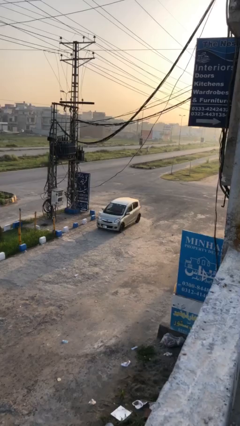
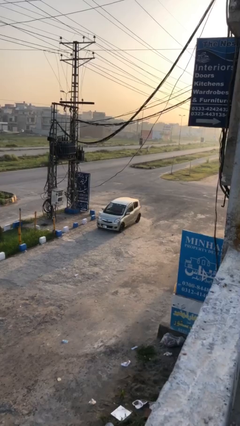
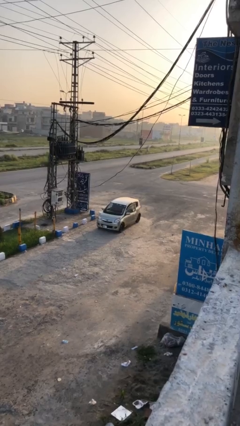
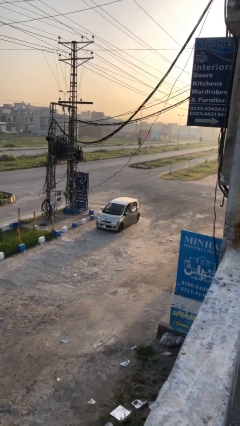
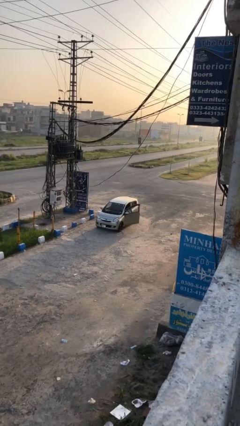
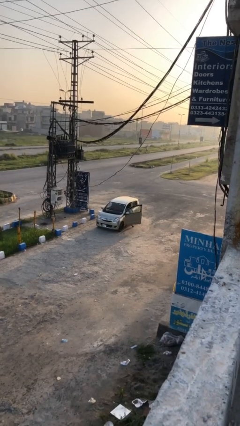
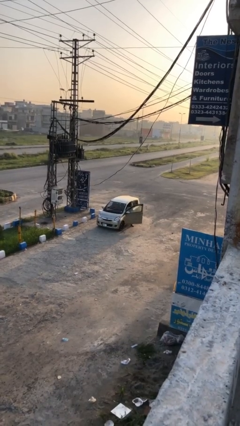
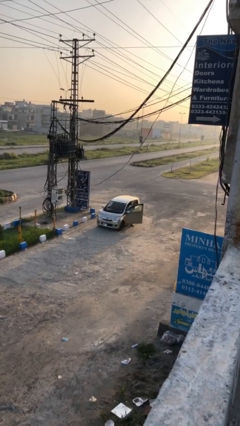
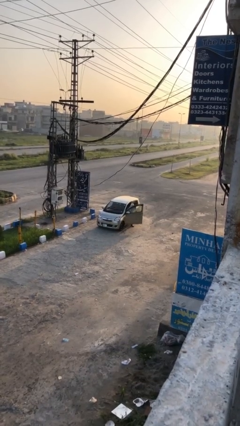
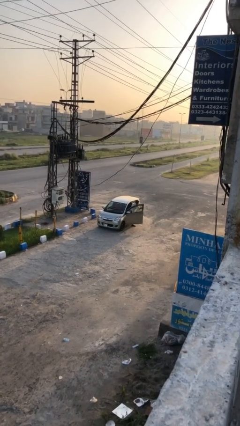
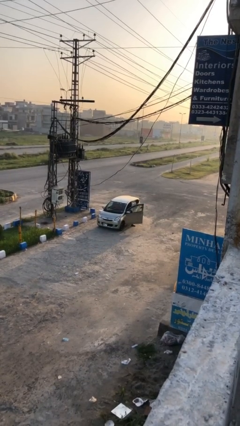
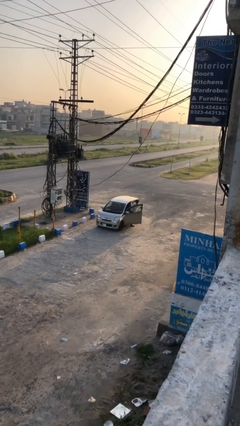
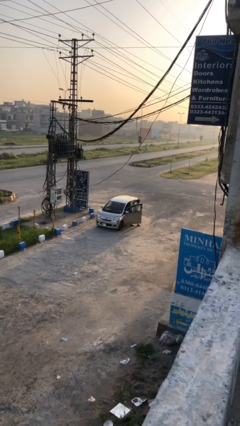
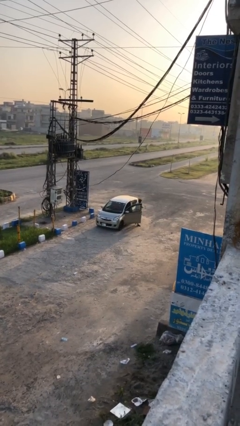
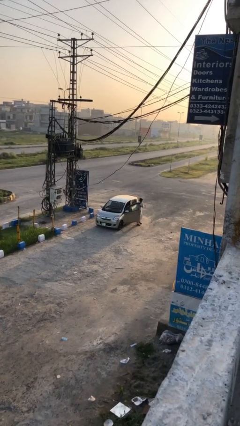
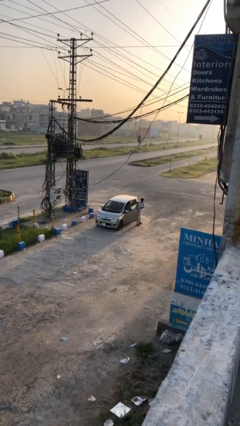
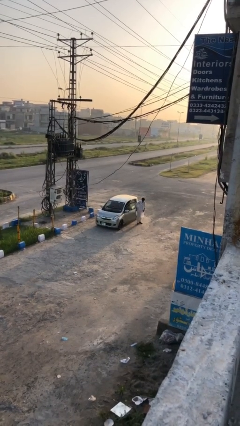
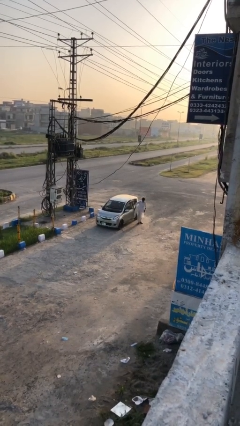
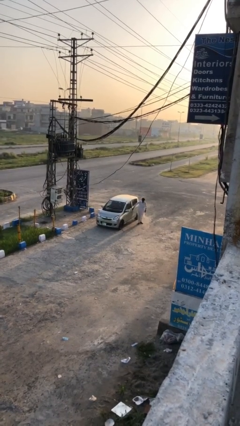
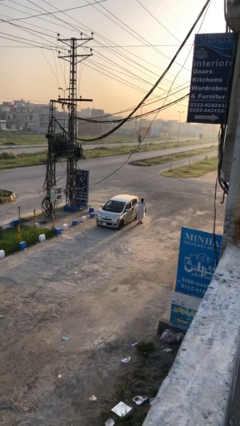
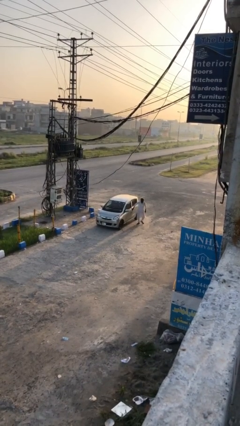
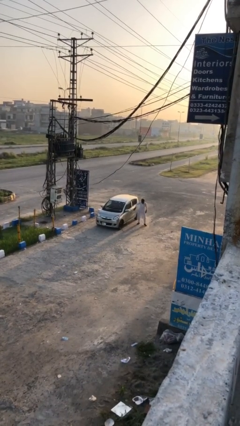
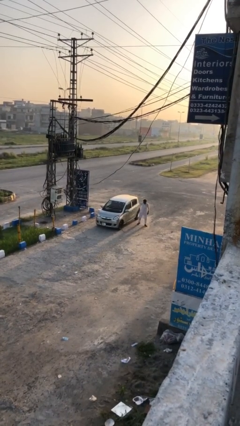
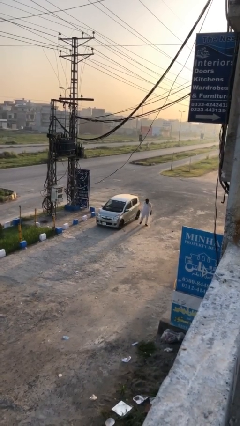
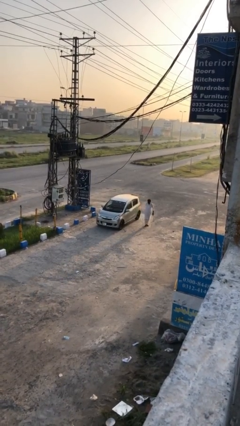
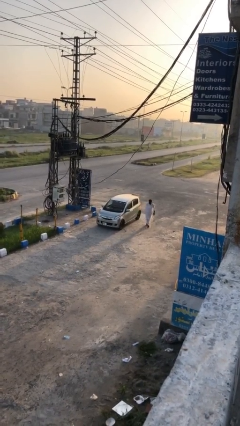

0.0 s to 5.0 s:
car drops off person

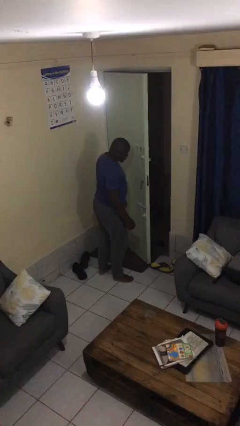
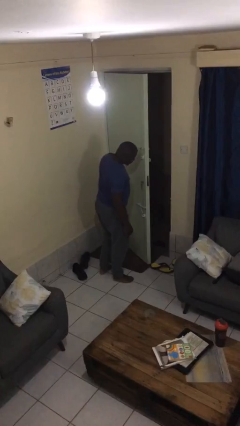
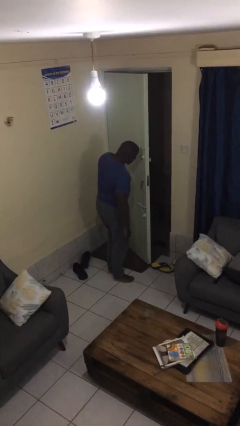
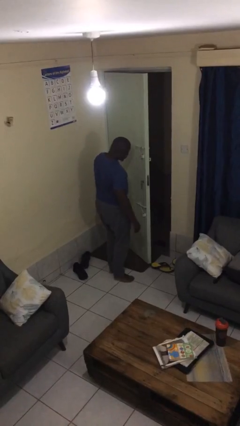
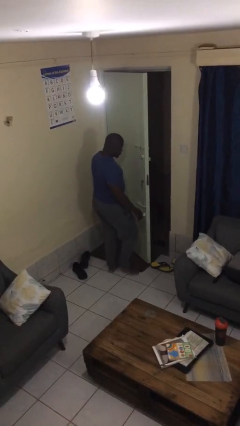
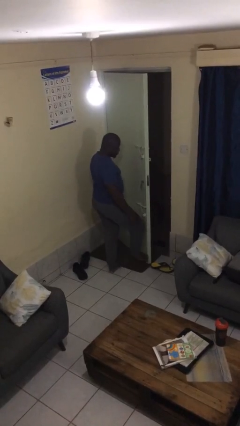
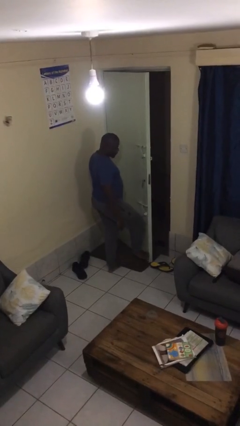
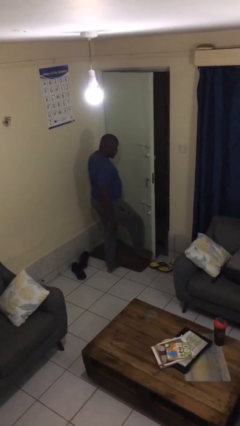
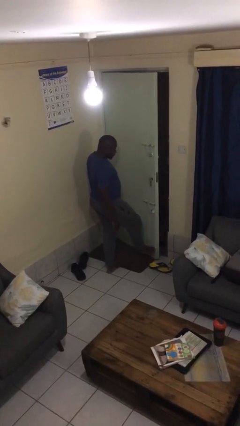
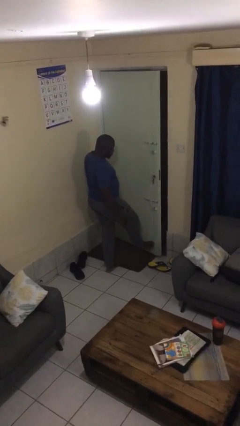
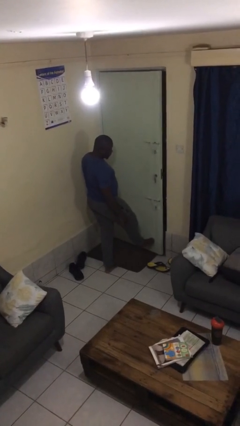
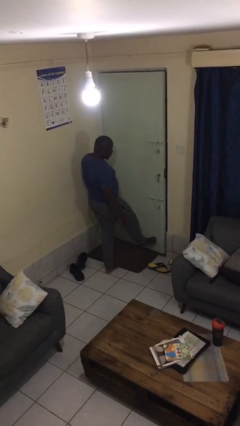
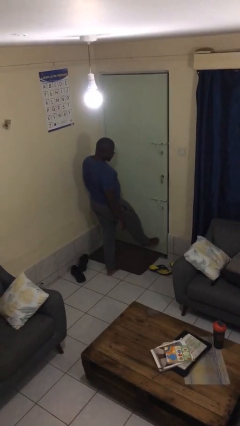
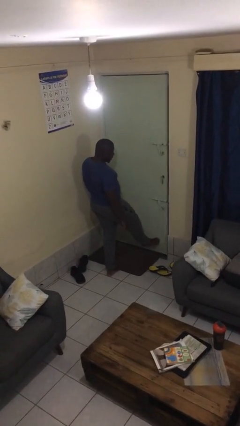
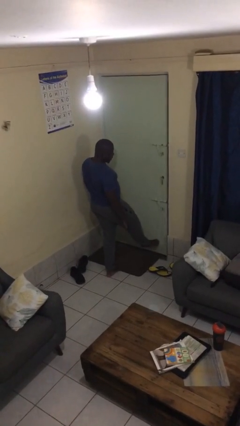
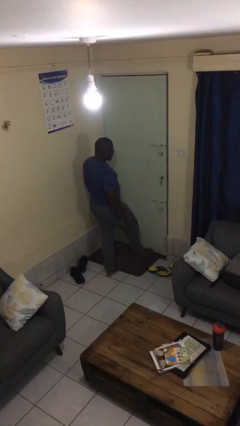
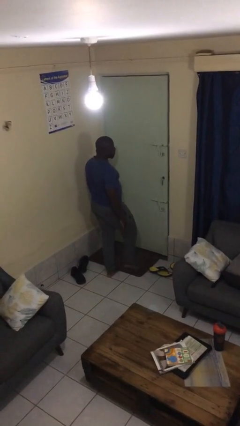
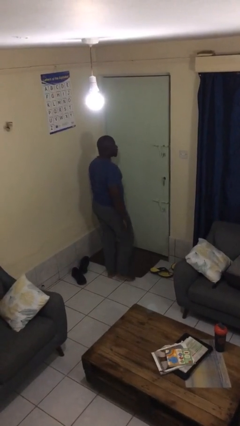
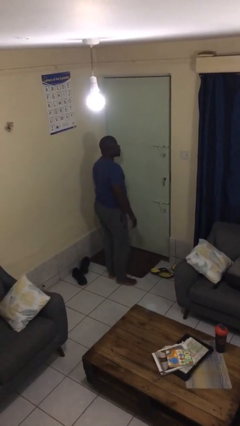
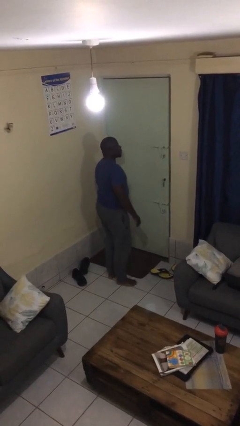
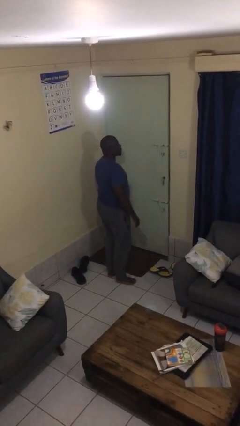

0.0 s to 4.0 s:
person closes door with foot

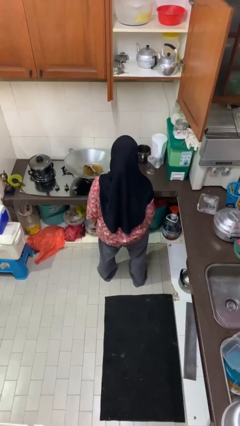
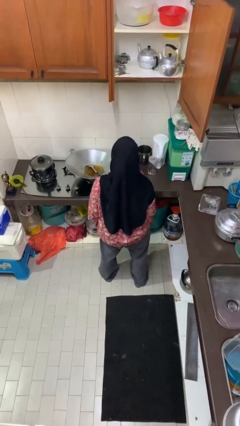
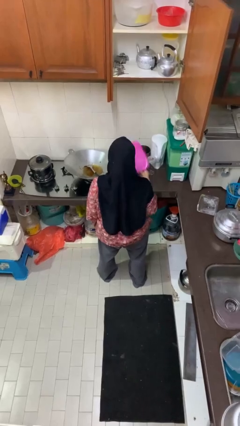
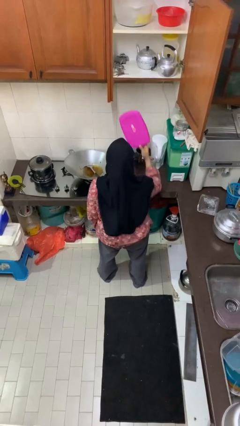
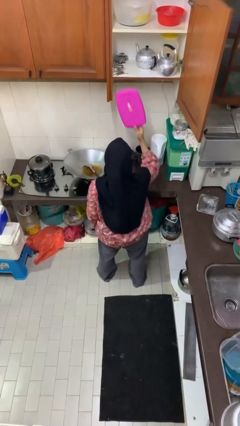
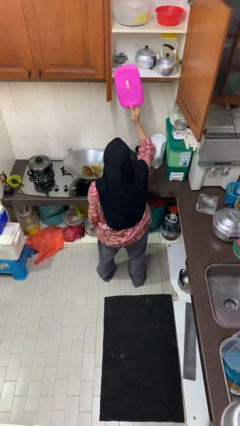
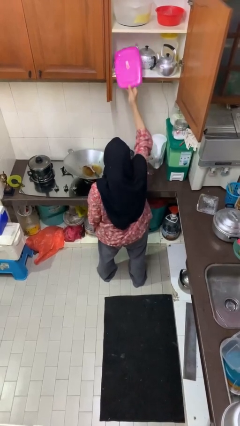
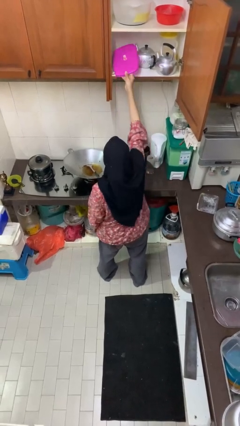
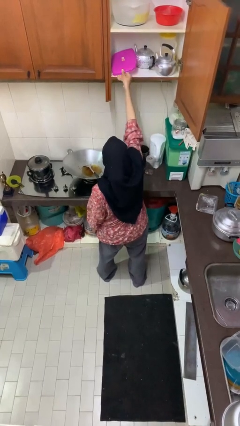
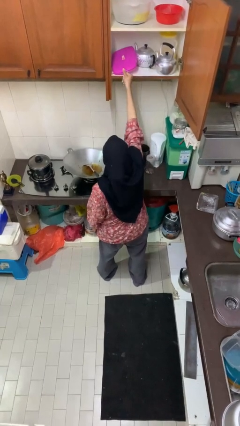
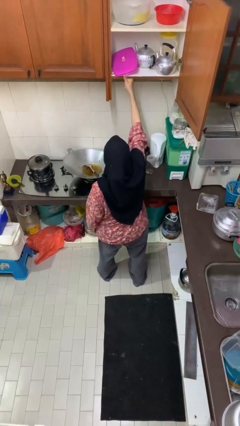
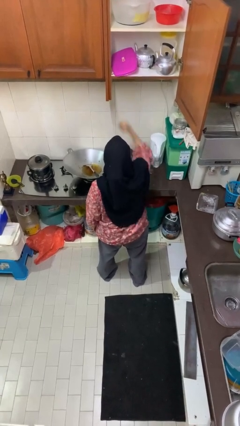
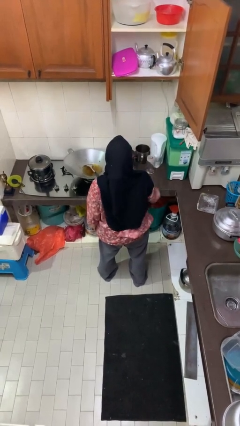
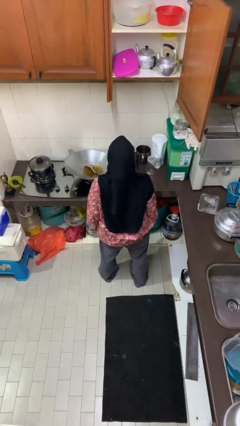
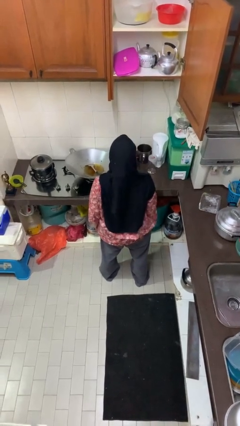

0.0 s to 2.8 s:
person puts object in cabinet

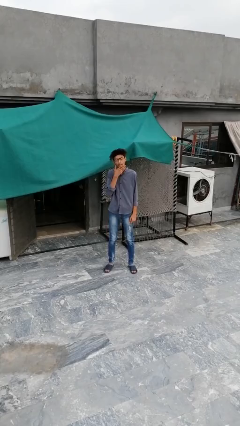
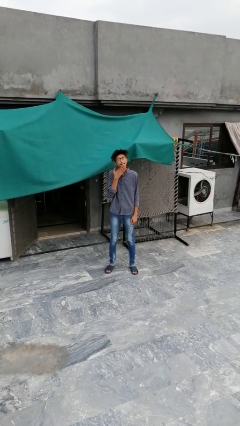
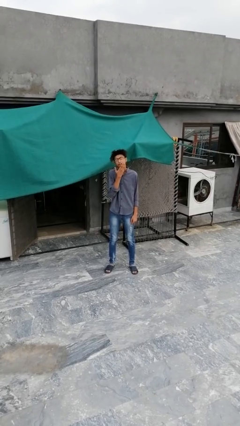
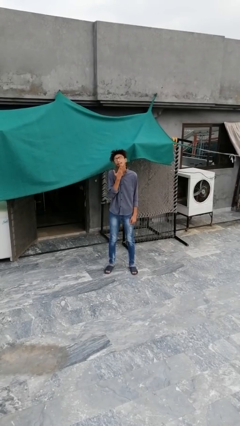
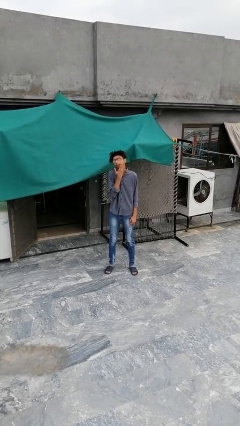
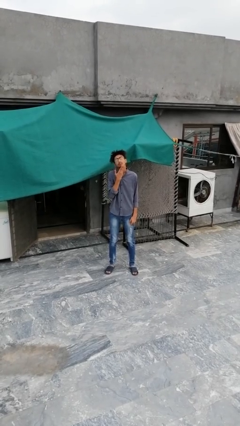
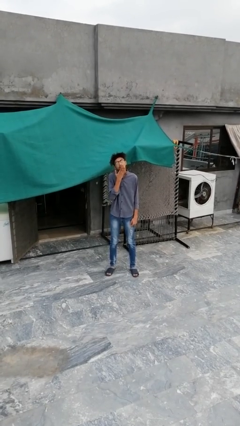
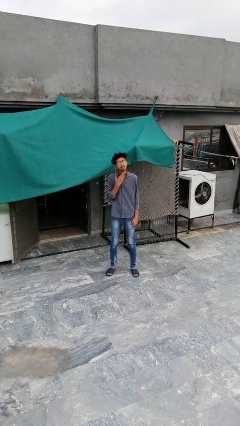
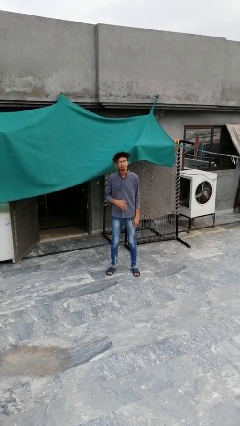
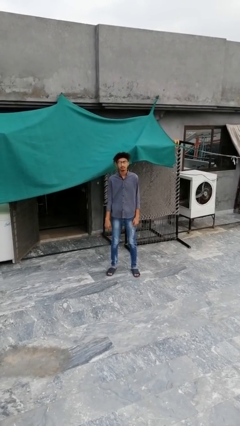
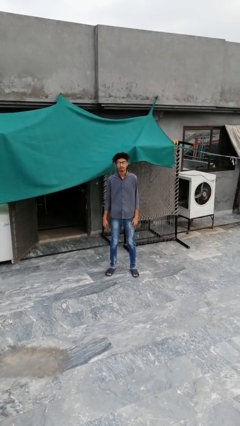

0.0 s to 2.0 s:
person strokes chin

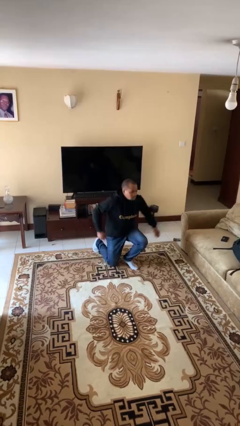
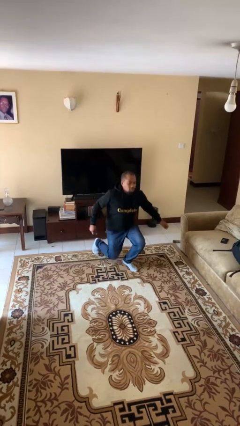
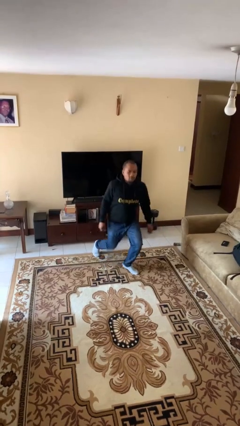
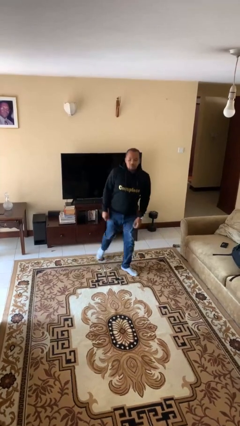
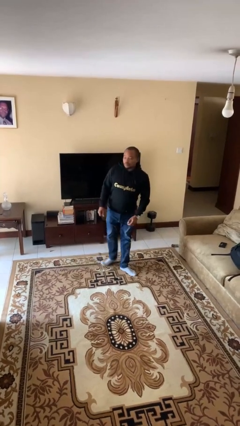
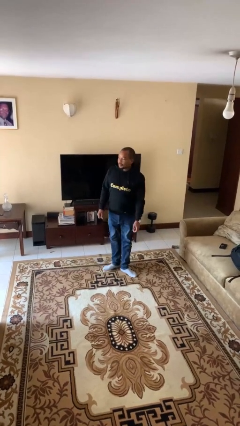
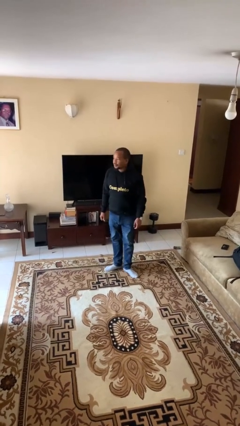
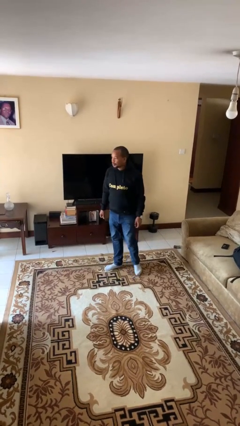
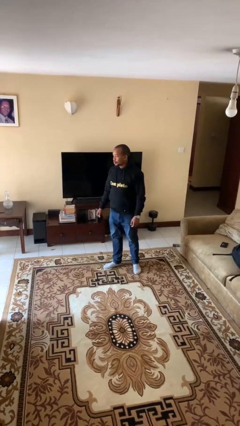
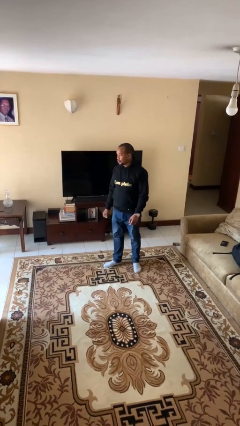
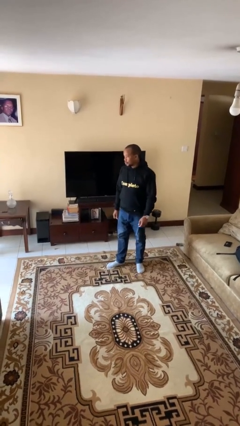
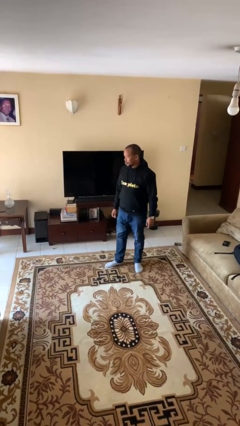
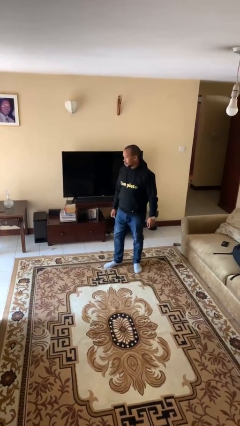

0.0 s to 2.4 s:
person stands up from floor

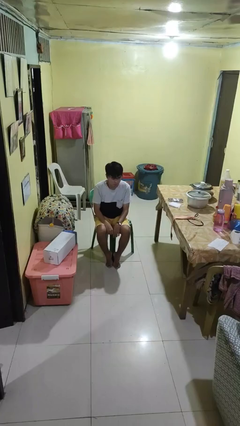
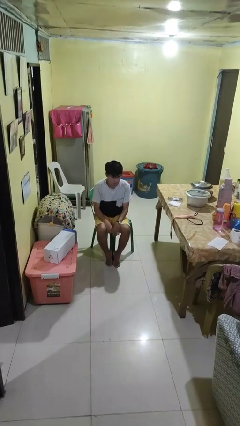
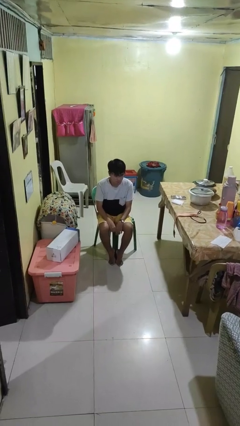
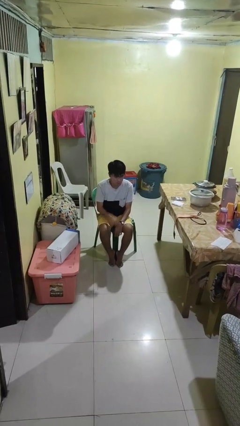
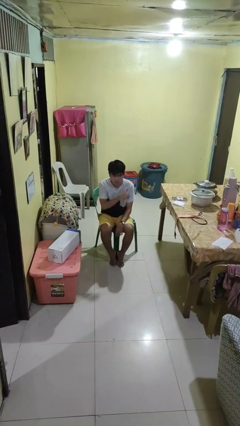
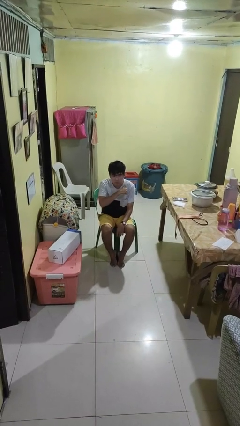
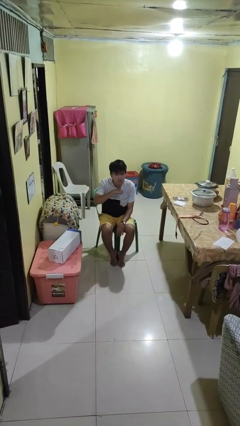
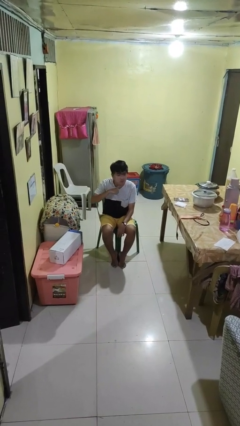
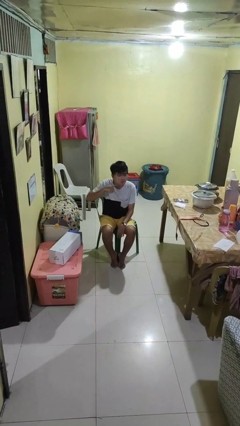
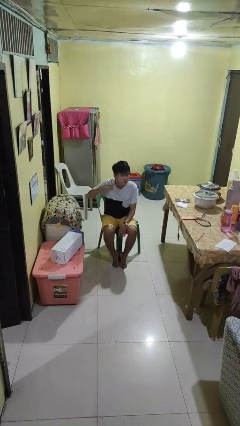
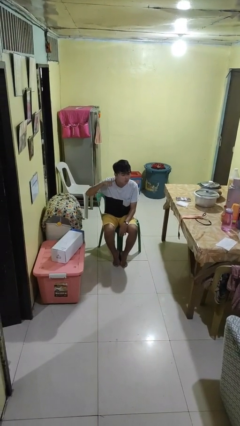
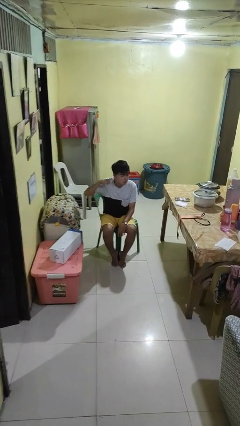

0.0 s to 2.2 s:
person gestures cut
